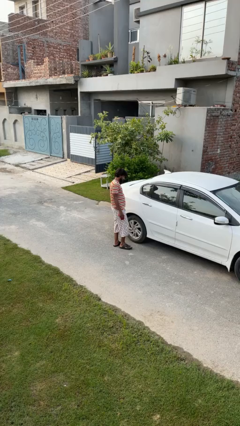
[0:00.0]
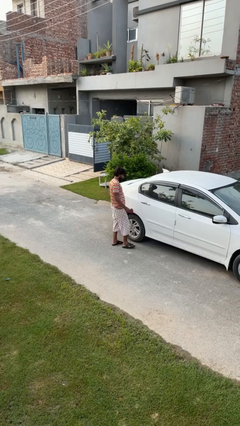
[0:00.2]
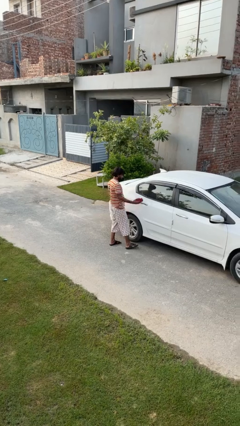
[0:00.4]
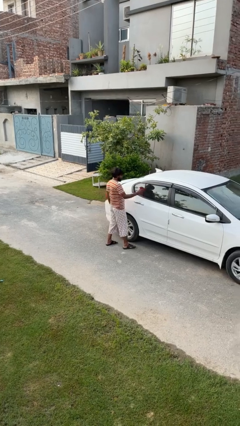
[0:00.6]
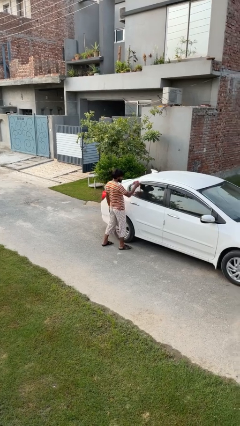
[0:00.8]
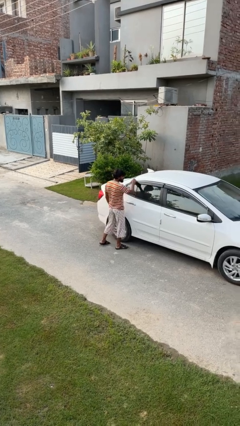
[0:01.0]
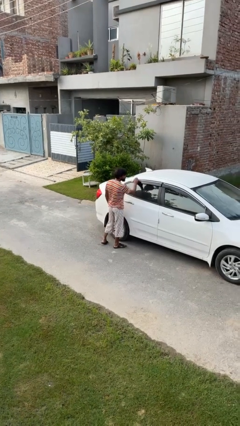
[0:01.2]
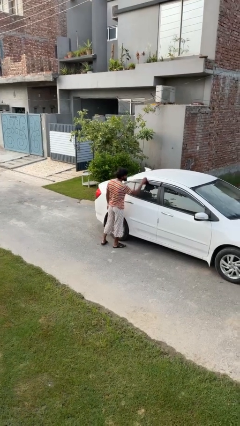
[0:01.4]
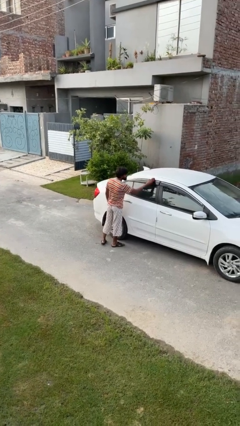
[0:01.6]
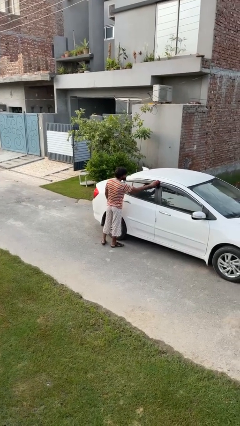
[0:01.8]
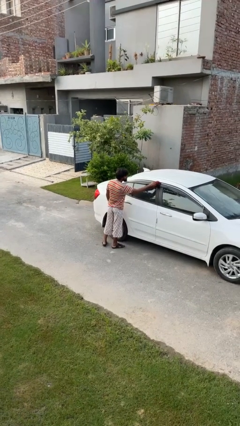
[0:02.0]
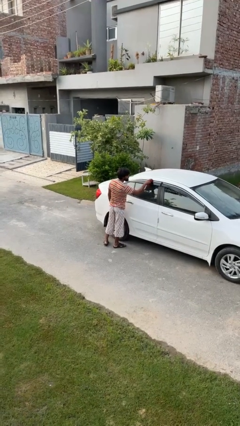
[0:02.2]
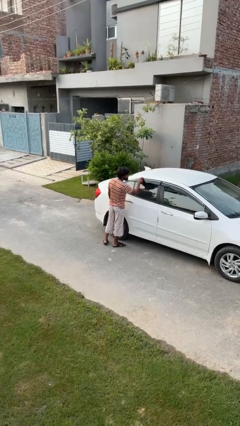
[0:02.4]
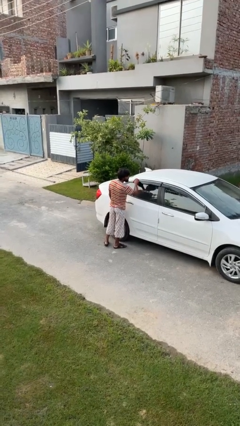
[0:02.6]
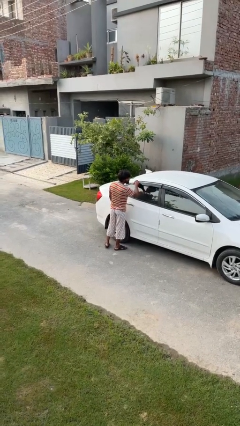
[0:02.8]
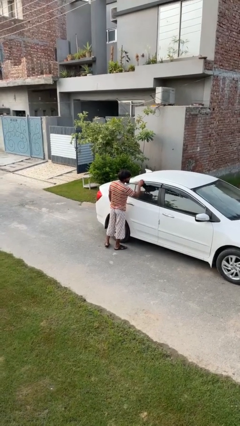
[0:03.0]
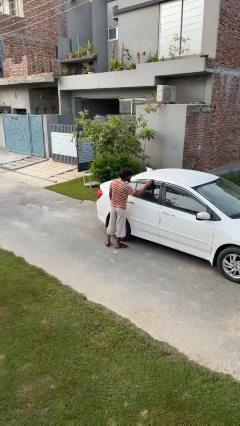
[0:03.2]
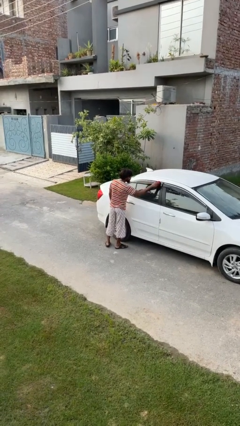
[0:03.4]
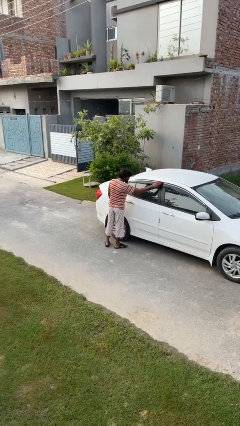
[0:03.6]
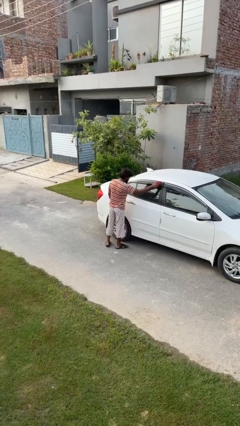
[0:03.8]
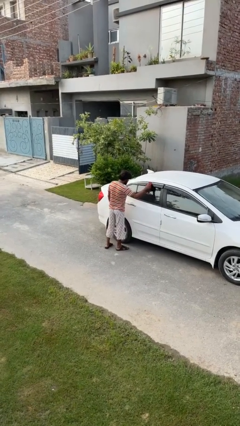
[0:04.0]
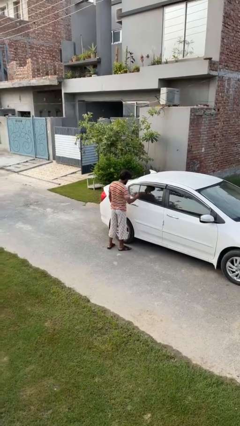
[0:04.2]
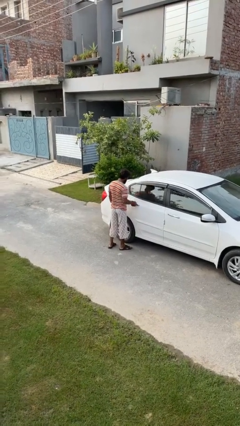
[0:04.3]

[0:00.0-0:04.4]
person polishes car with rag

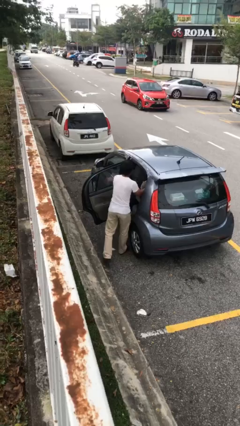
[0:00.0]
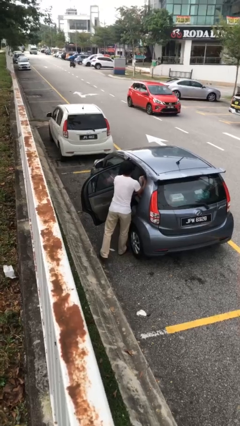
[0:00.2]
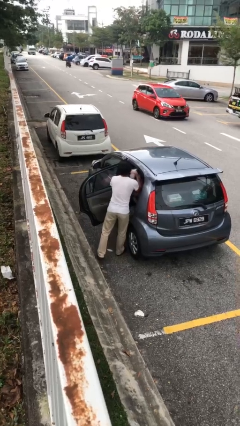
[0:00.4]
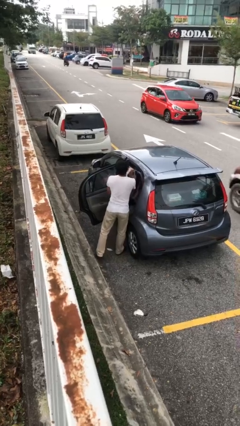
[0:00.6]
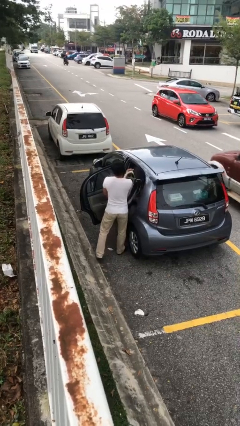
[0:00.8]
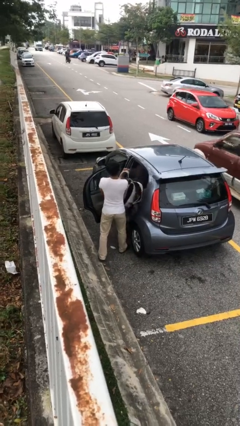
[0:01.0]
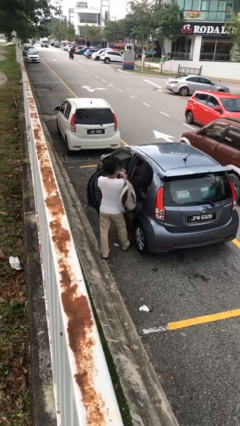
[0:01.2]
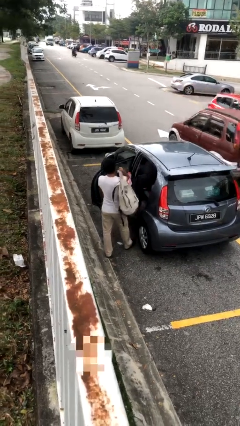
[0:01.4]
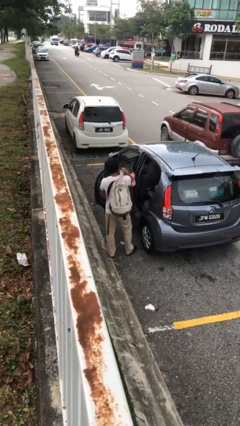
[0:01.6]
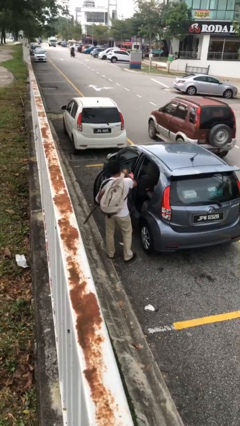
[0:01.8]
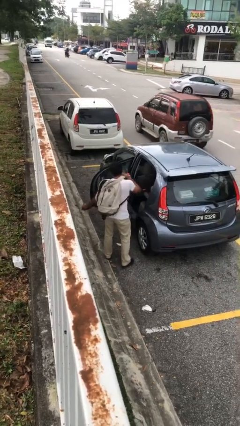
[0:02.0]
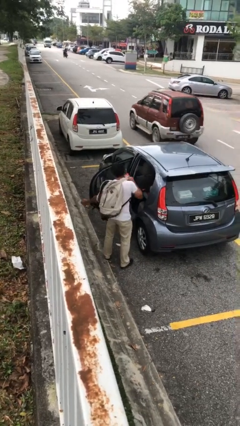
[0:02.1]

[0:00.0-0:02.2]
person unloads car

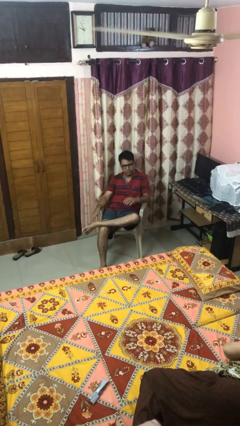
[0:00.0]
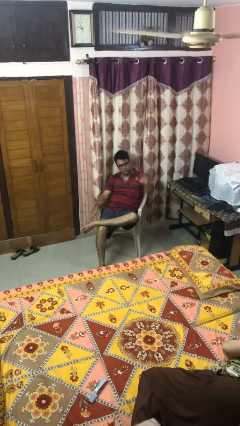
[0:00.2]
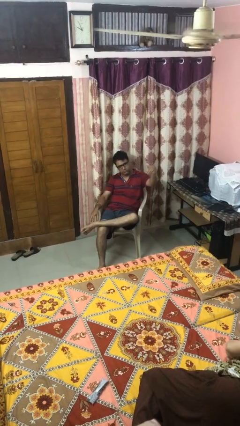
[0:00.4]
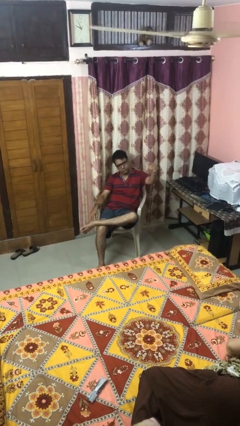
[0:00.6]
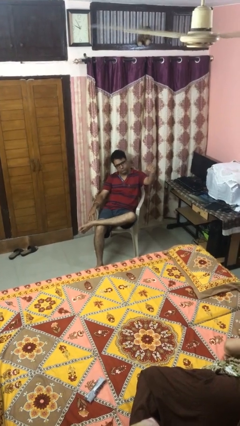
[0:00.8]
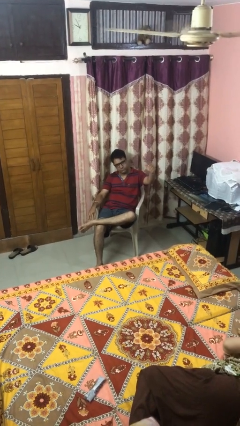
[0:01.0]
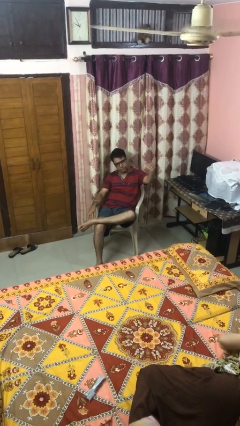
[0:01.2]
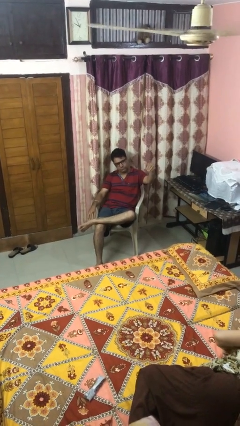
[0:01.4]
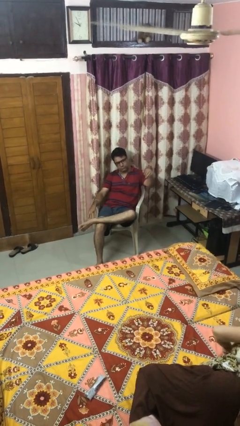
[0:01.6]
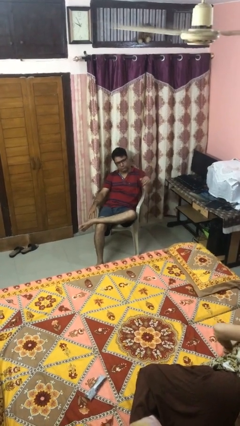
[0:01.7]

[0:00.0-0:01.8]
person gestures come here

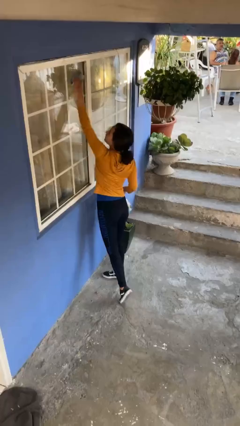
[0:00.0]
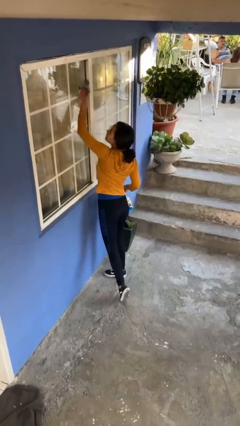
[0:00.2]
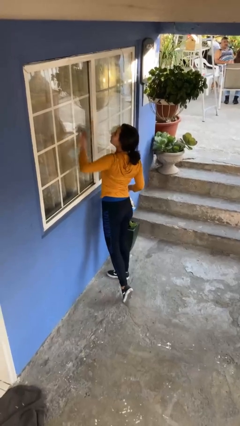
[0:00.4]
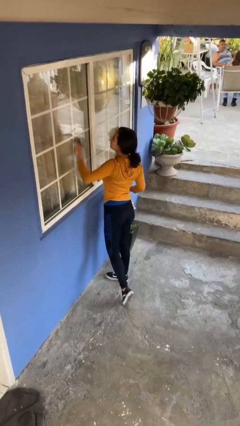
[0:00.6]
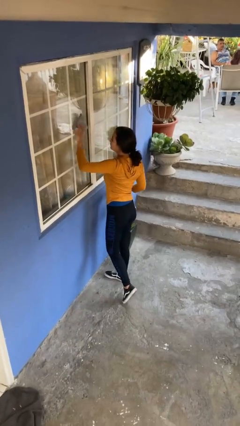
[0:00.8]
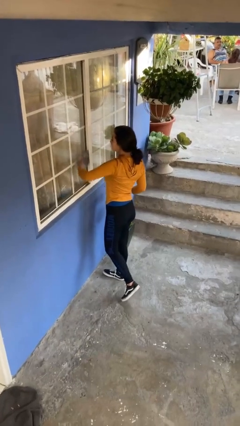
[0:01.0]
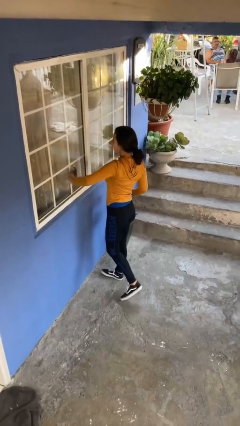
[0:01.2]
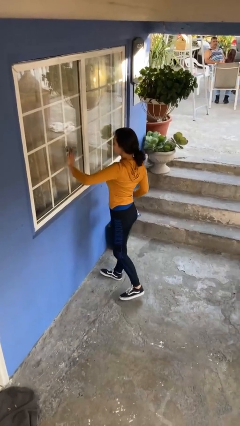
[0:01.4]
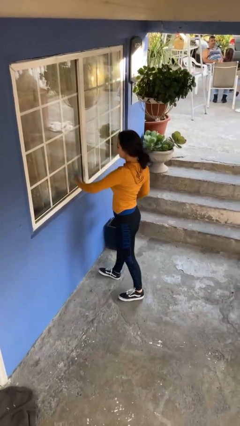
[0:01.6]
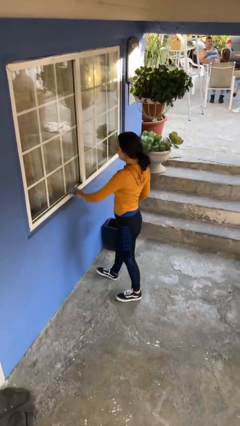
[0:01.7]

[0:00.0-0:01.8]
person washes window

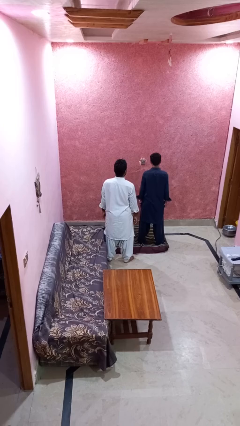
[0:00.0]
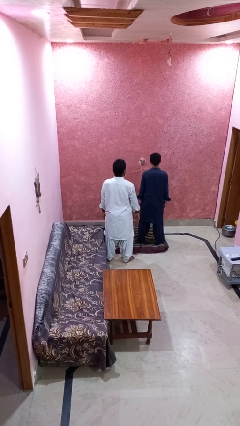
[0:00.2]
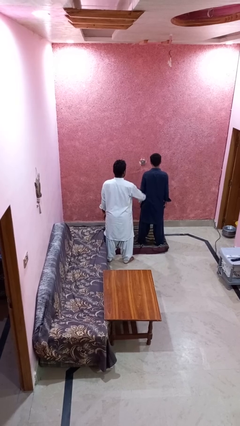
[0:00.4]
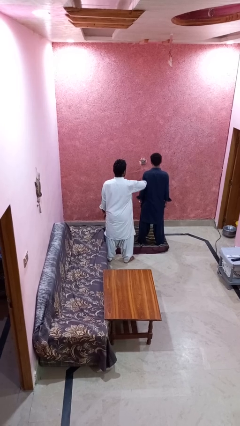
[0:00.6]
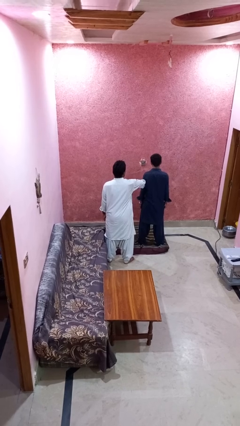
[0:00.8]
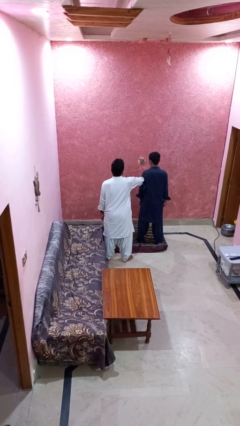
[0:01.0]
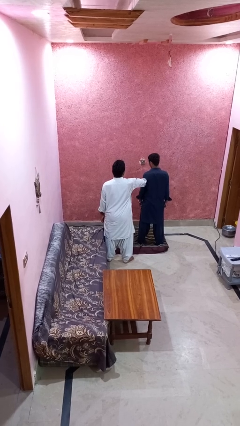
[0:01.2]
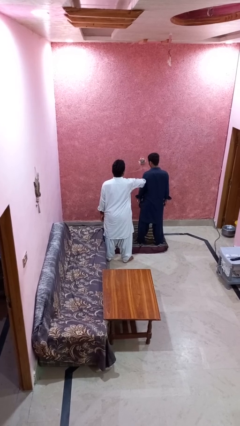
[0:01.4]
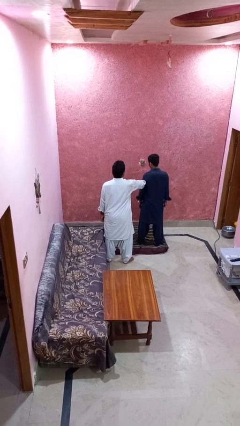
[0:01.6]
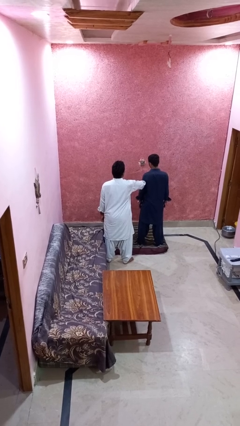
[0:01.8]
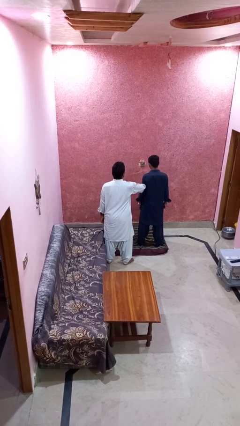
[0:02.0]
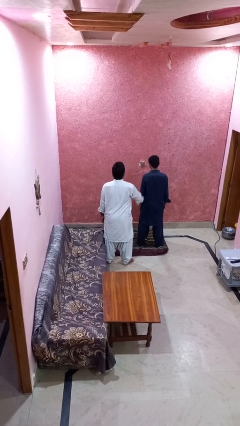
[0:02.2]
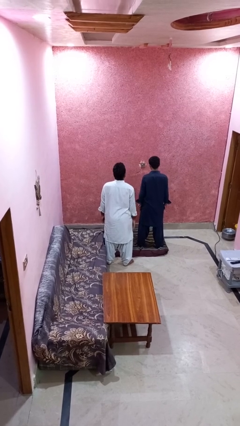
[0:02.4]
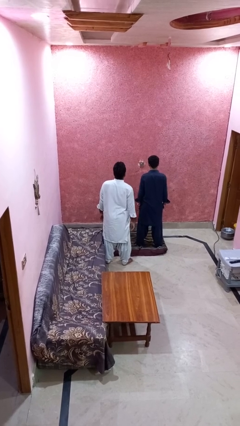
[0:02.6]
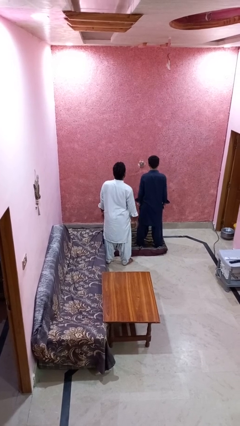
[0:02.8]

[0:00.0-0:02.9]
person grabs person by forearm

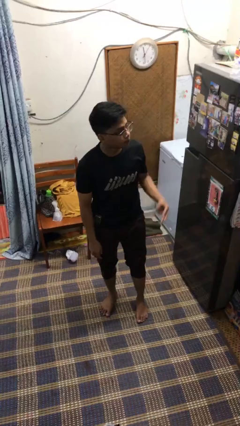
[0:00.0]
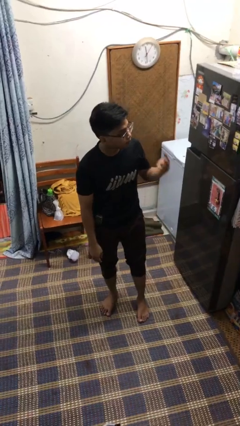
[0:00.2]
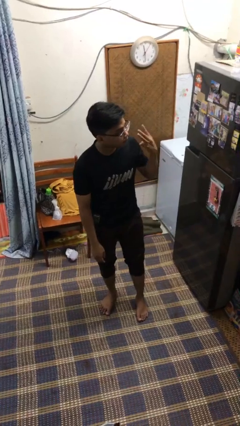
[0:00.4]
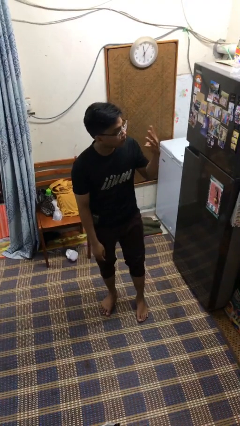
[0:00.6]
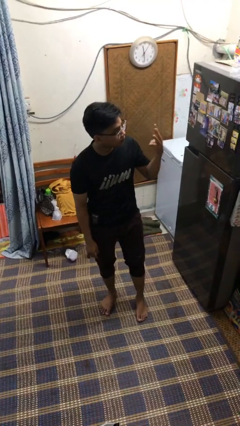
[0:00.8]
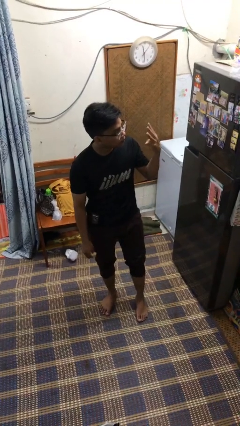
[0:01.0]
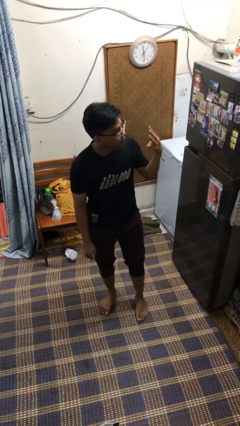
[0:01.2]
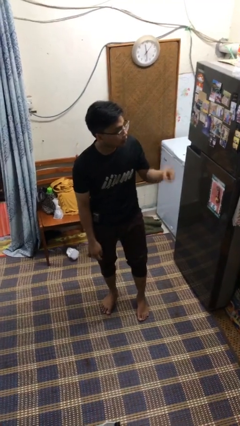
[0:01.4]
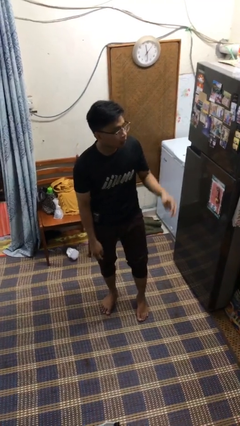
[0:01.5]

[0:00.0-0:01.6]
person gestures number three

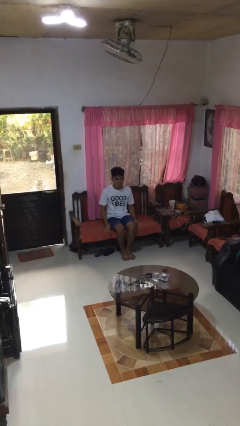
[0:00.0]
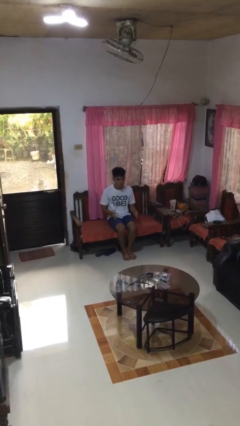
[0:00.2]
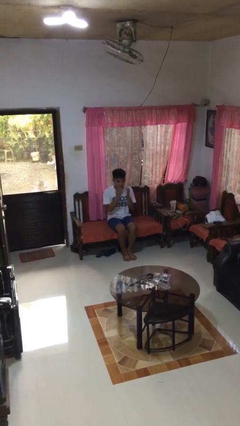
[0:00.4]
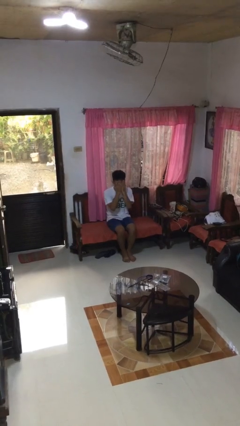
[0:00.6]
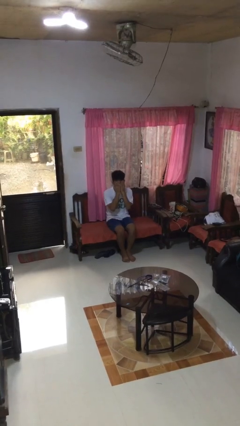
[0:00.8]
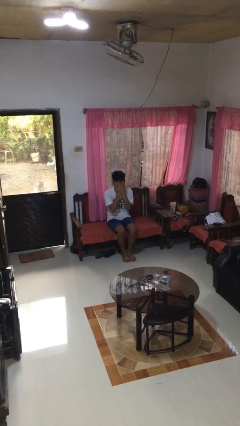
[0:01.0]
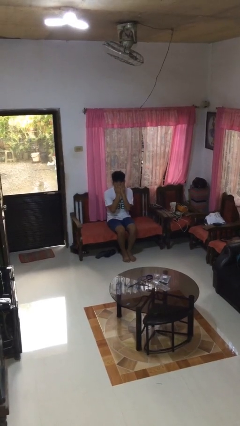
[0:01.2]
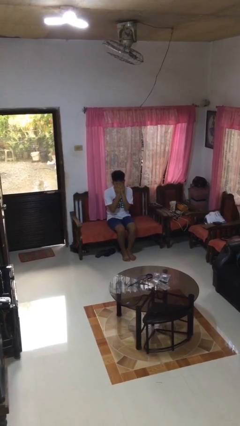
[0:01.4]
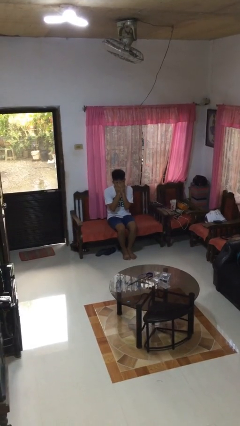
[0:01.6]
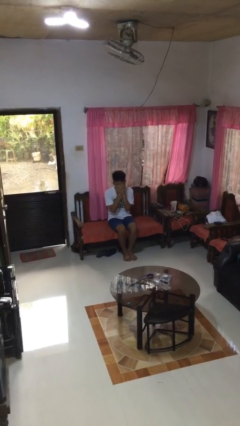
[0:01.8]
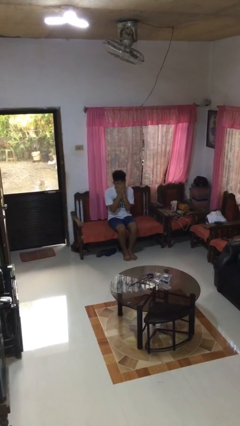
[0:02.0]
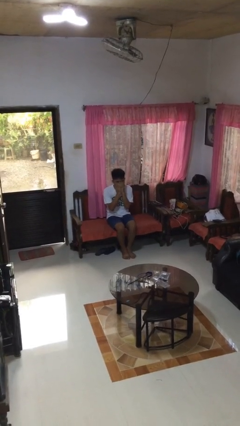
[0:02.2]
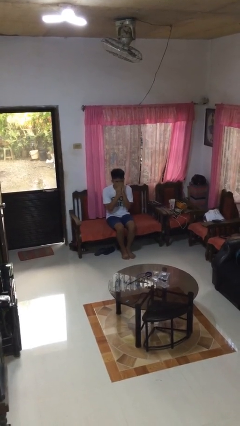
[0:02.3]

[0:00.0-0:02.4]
person covers face with hands
